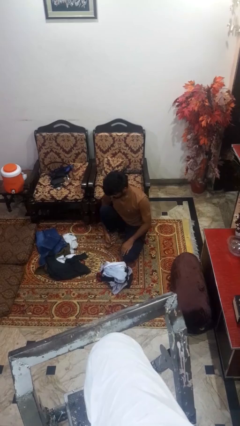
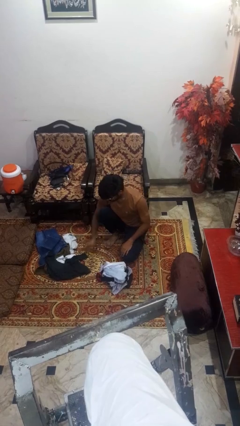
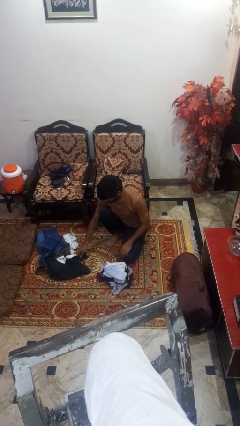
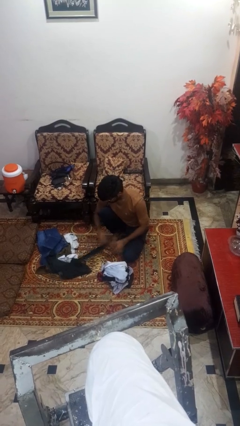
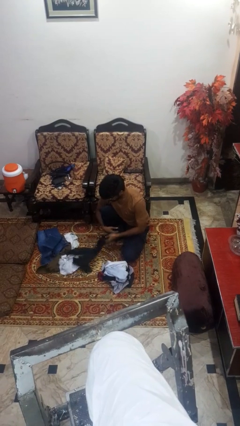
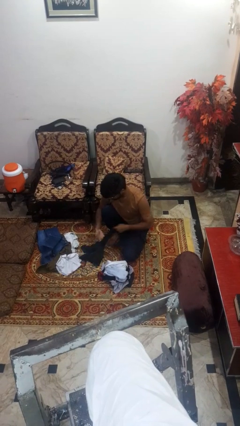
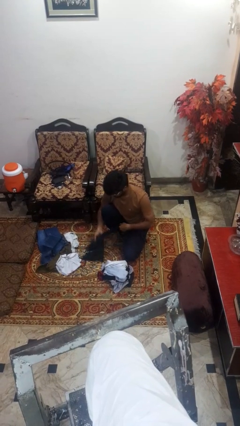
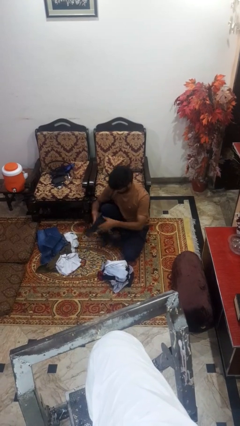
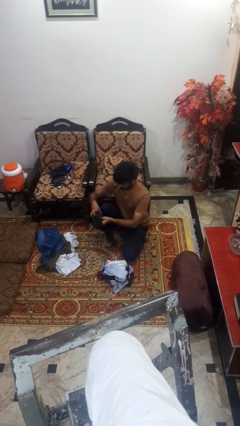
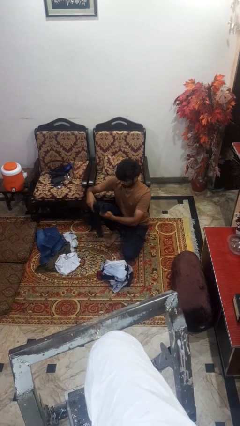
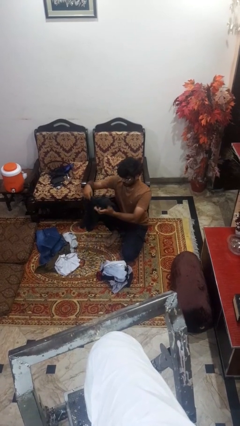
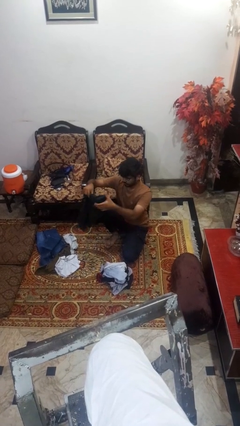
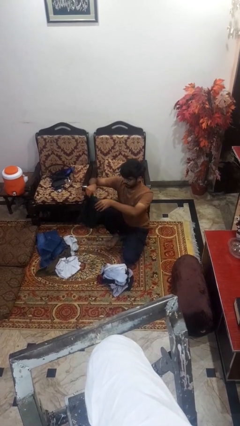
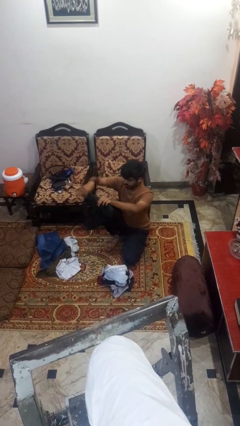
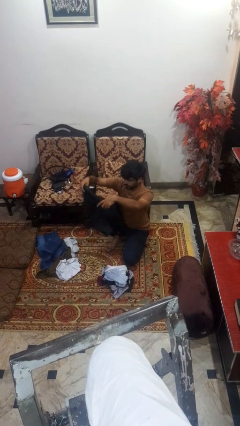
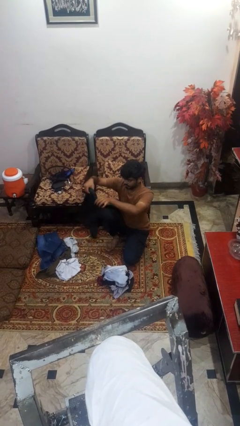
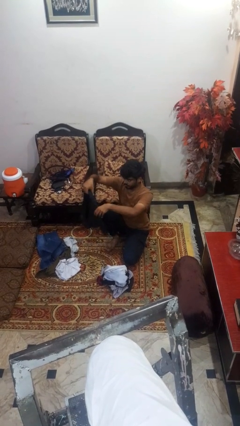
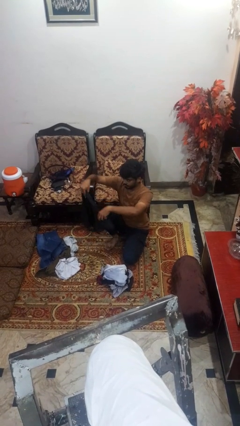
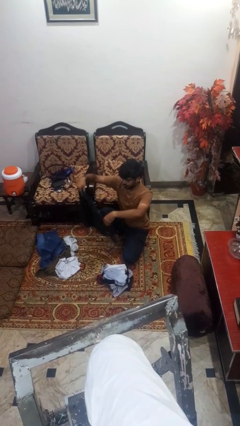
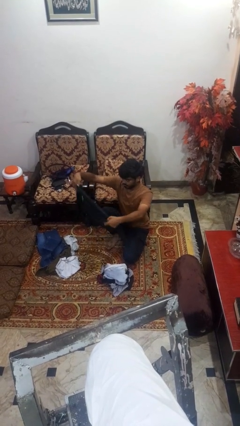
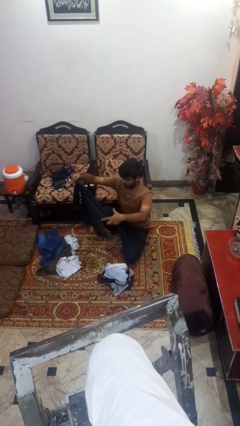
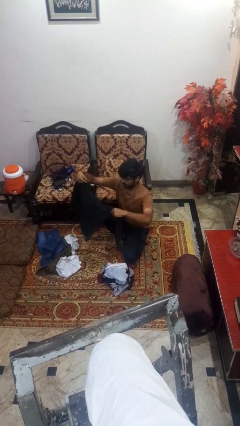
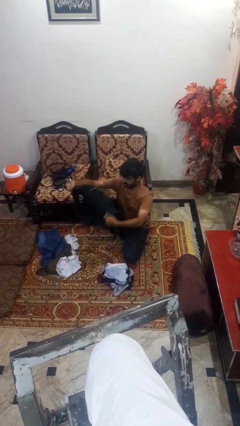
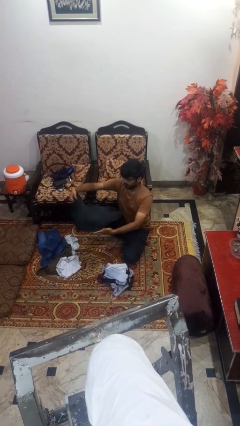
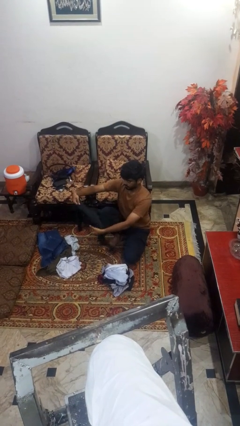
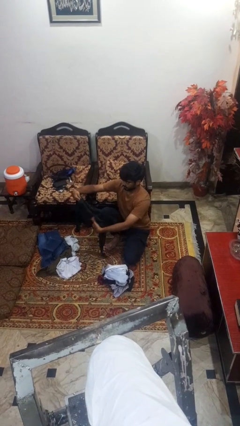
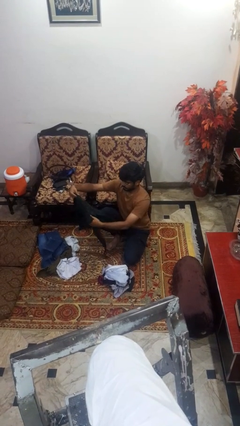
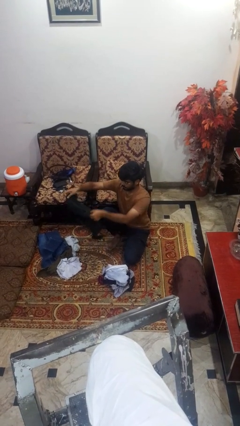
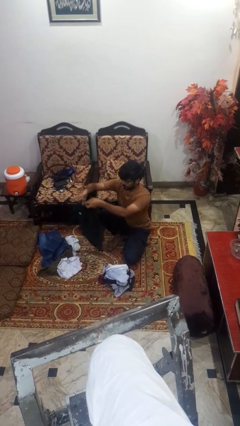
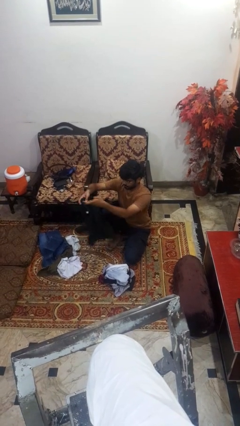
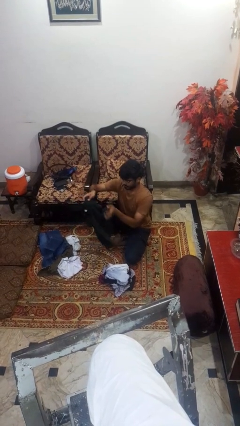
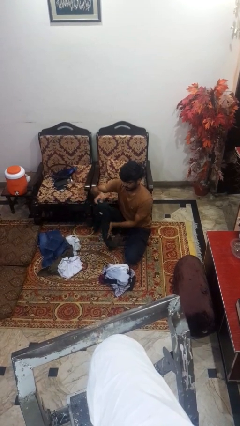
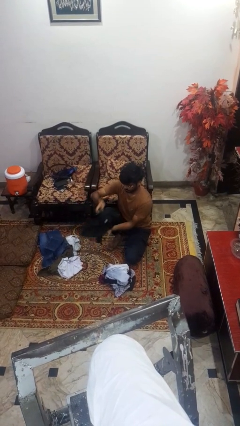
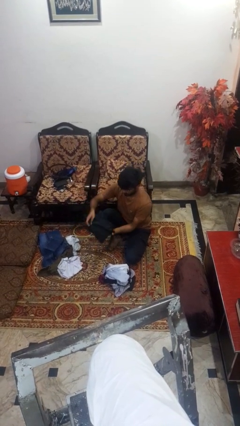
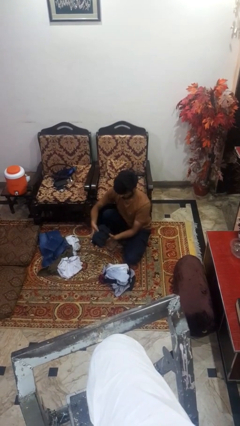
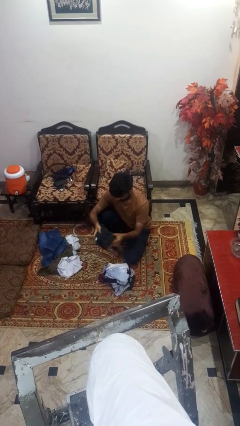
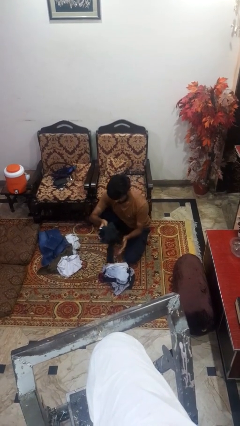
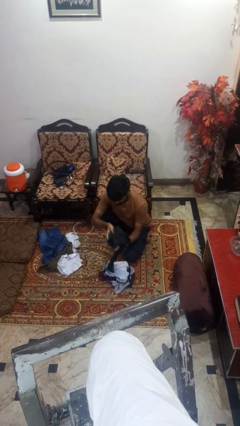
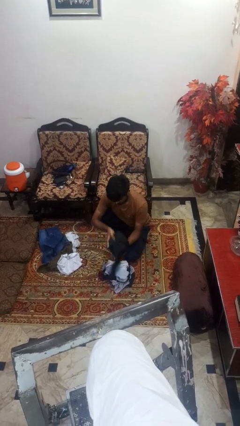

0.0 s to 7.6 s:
person folds shirt

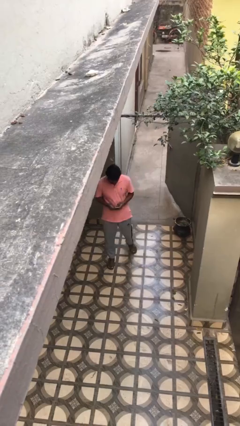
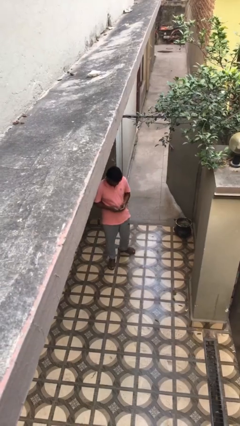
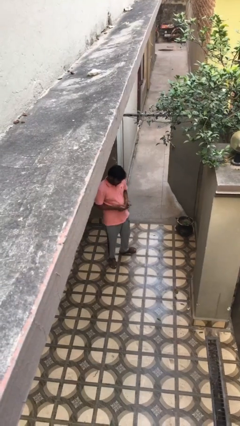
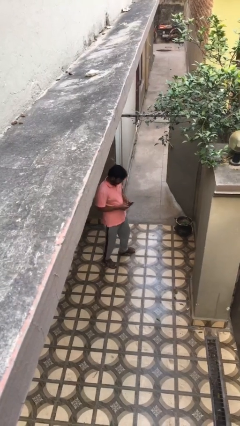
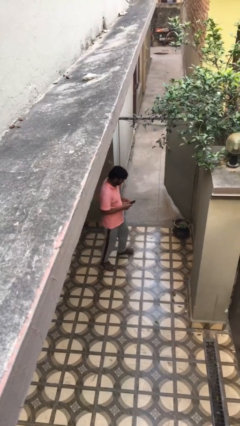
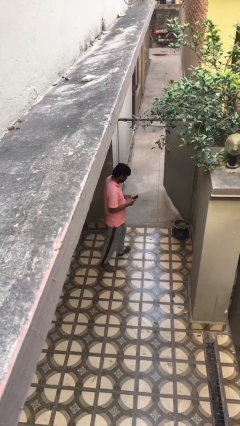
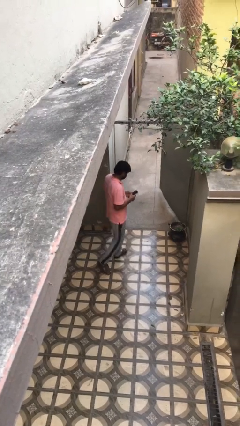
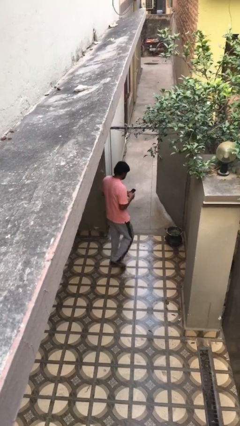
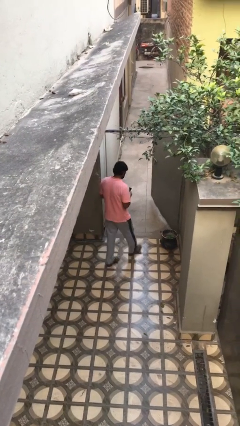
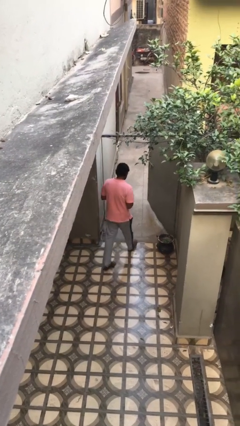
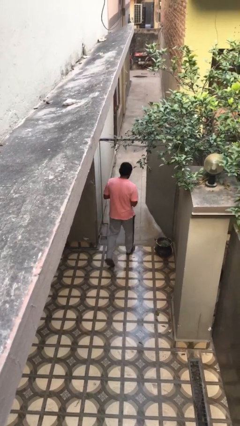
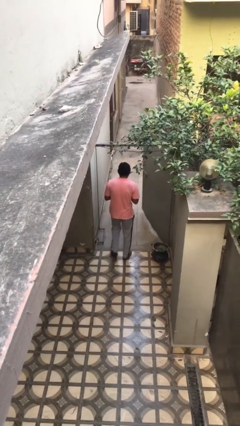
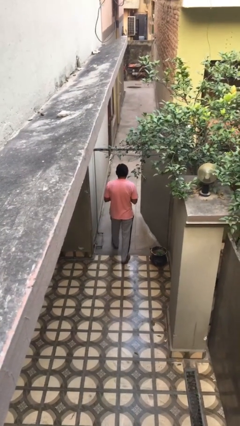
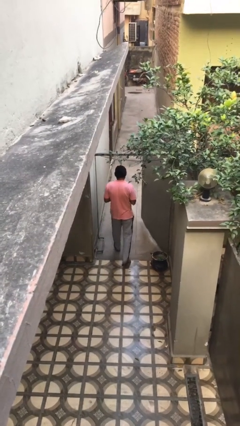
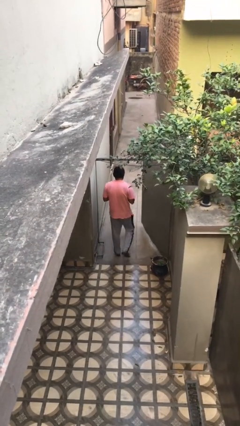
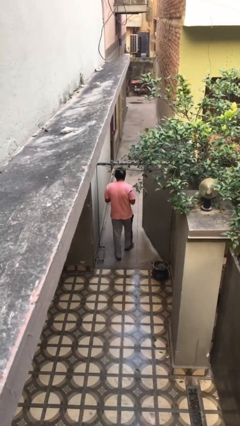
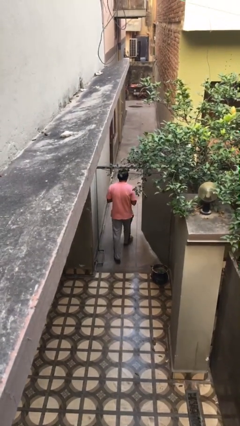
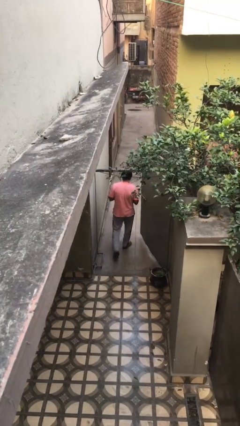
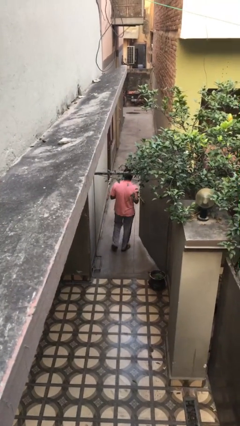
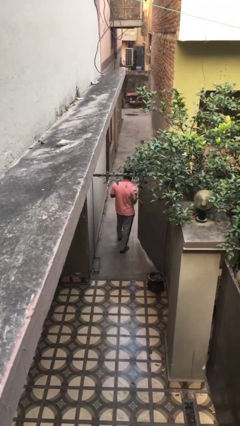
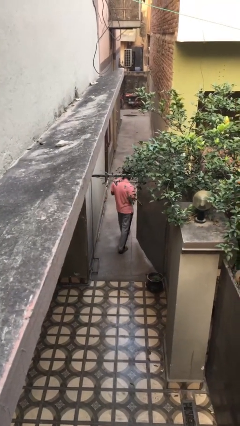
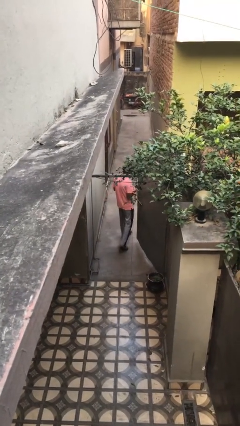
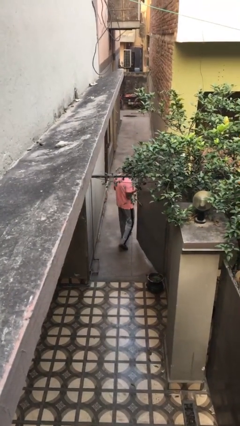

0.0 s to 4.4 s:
person exits scene through structure

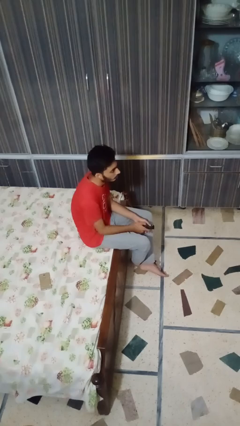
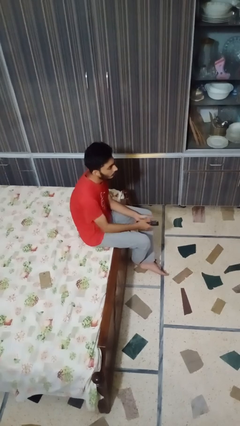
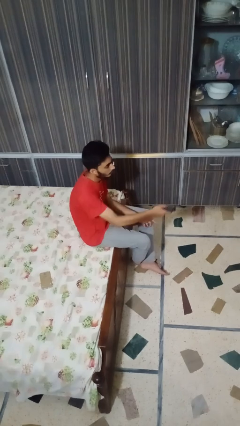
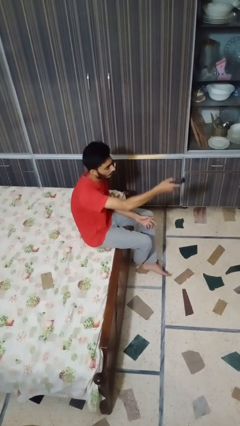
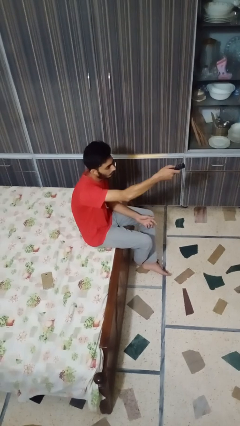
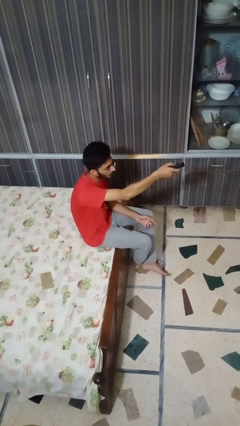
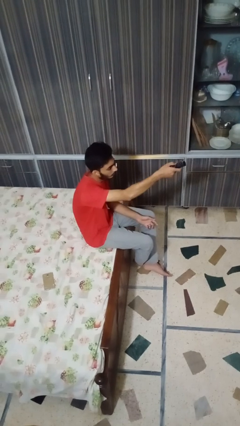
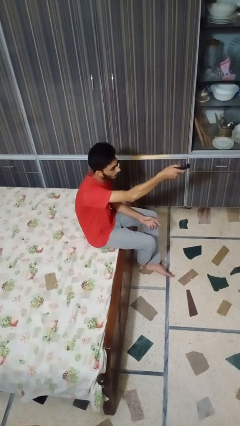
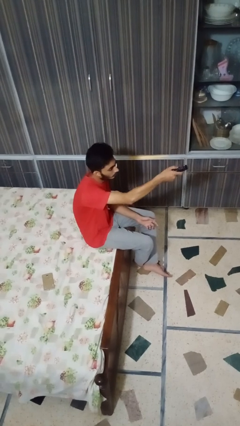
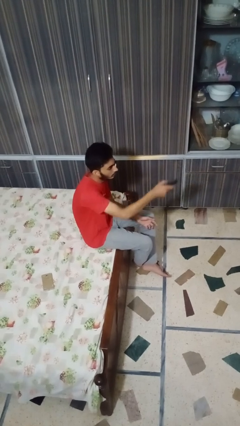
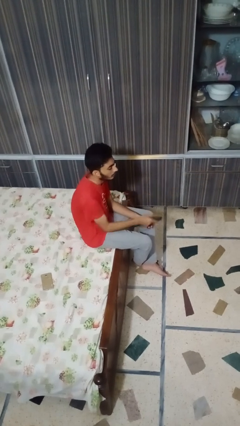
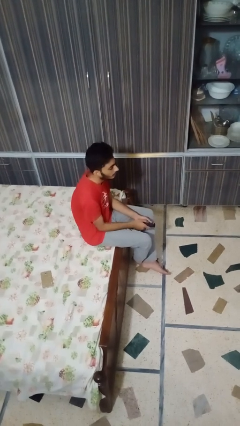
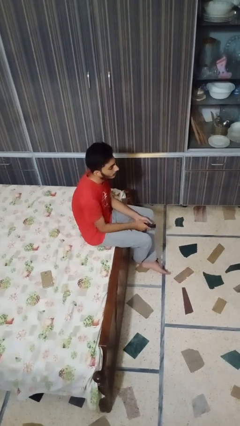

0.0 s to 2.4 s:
person uses television remote

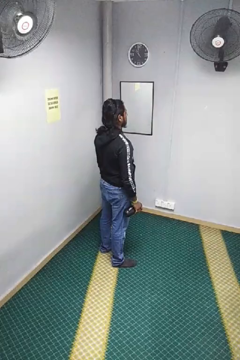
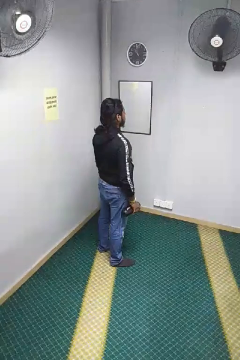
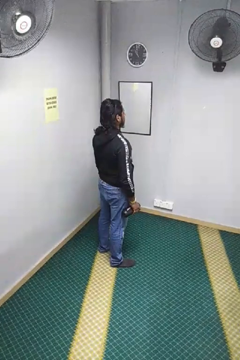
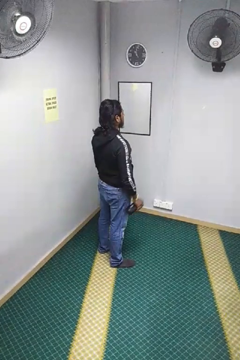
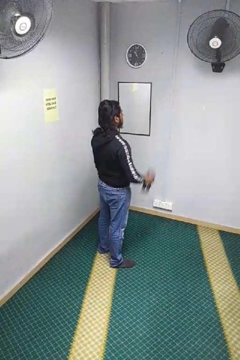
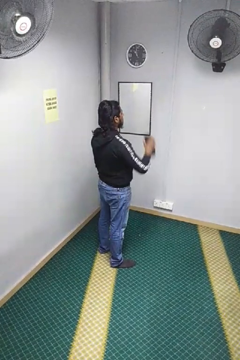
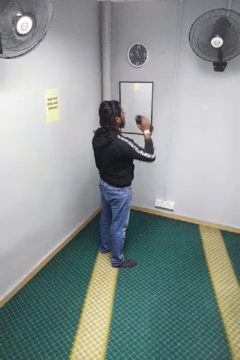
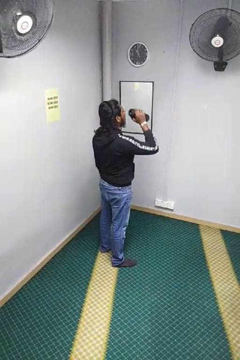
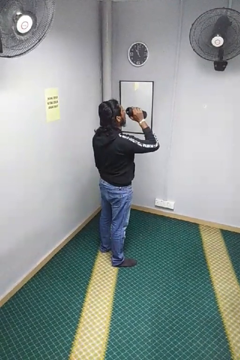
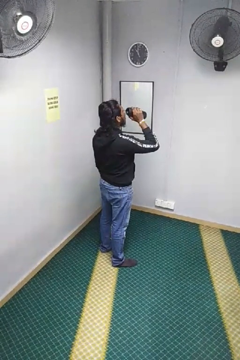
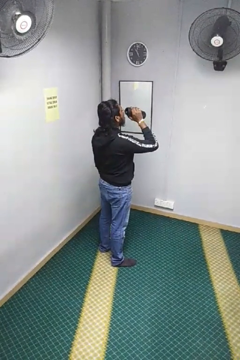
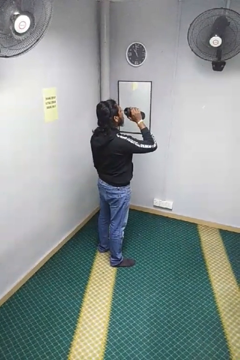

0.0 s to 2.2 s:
person drinks from bottle

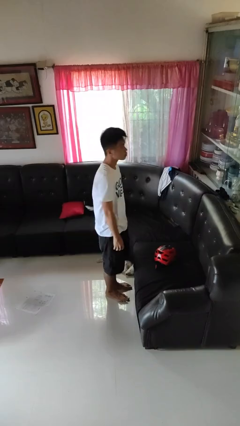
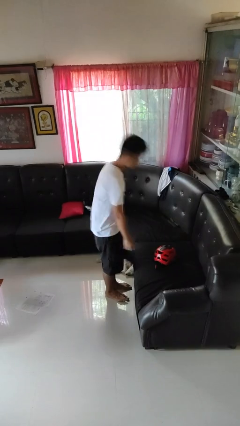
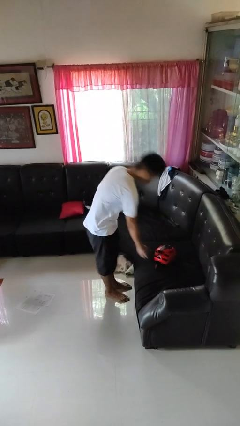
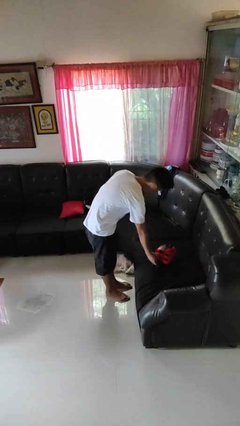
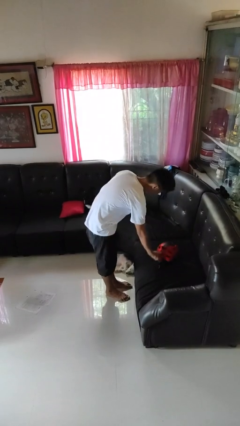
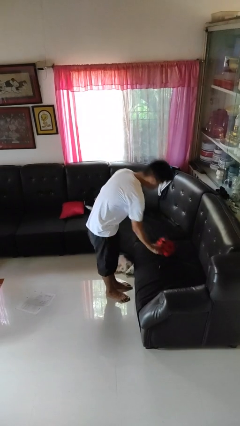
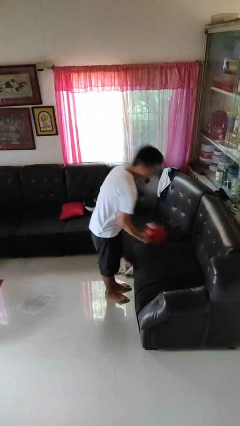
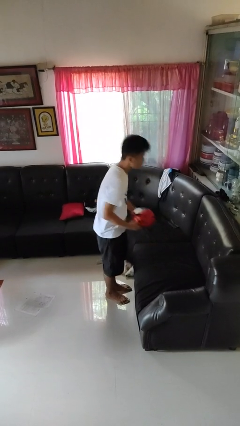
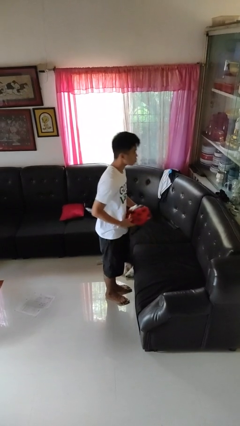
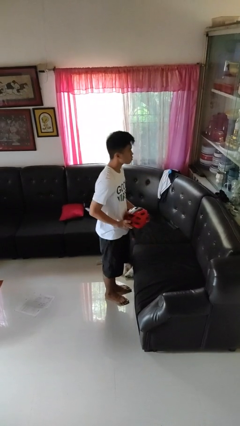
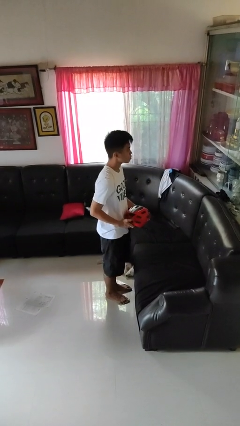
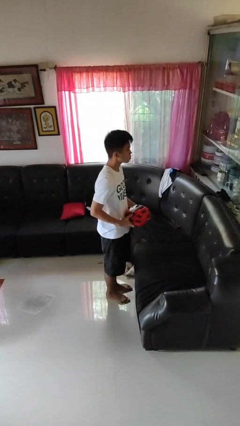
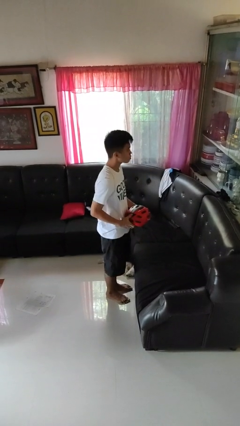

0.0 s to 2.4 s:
person picks up object from couch
